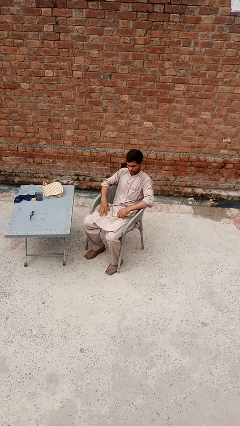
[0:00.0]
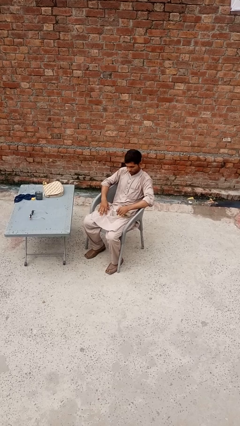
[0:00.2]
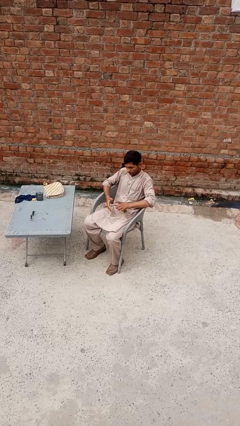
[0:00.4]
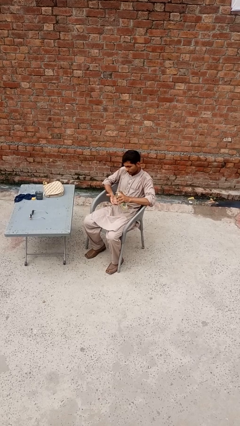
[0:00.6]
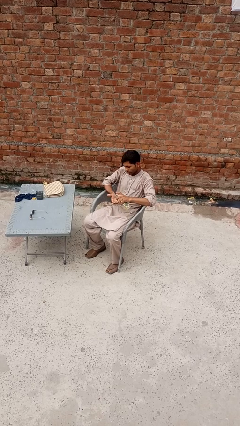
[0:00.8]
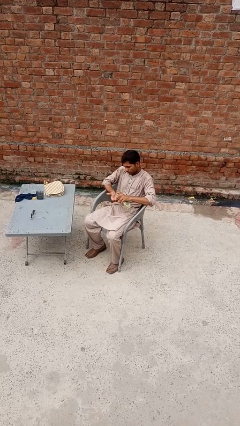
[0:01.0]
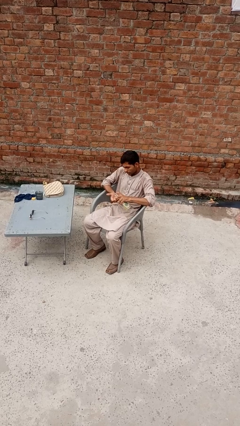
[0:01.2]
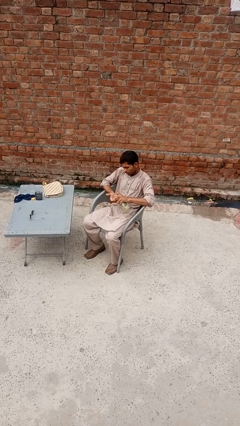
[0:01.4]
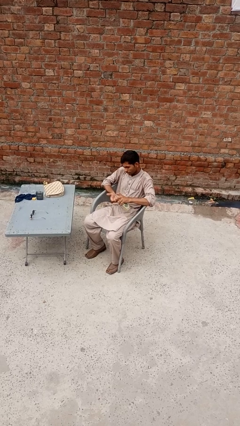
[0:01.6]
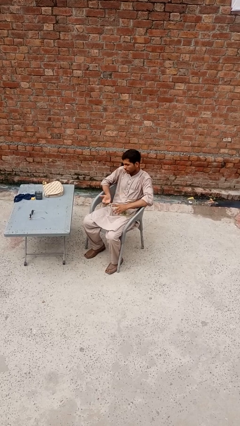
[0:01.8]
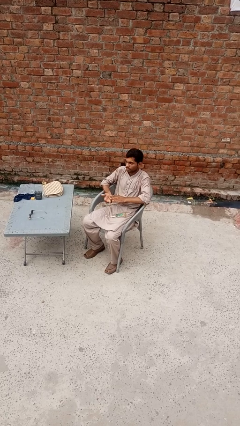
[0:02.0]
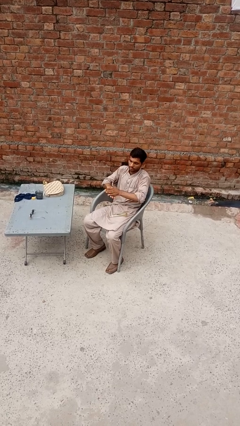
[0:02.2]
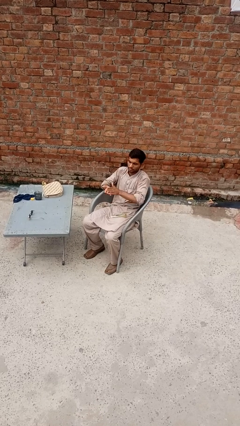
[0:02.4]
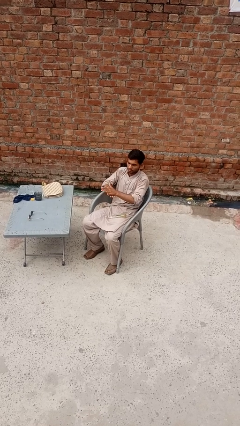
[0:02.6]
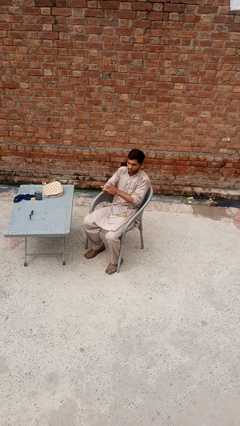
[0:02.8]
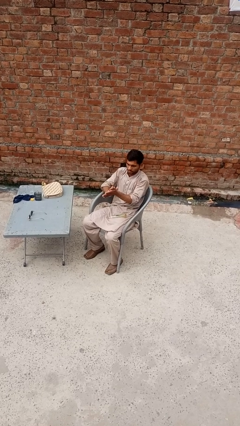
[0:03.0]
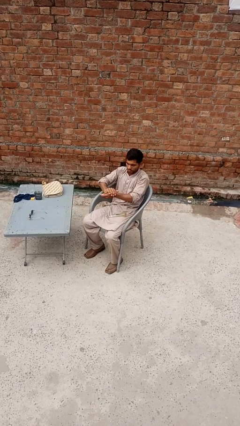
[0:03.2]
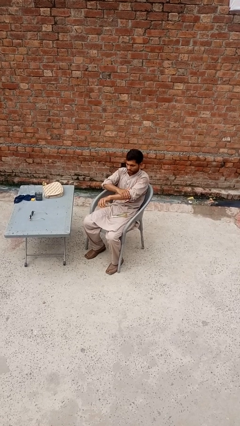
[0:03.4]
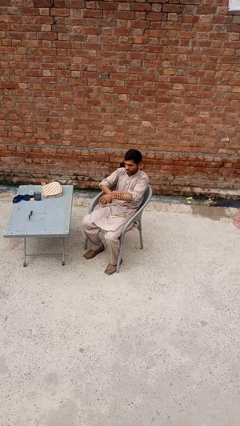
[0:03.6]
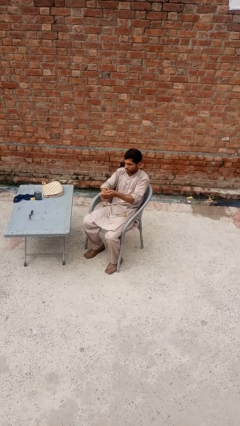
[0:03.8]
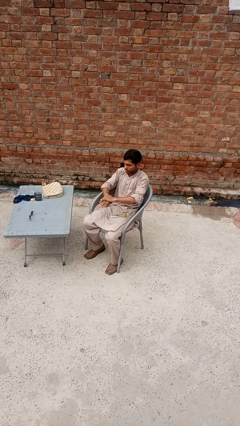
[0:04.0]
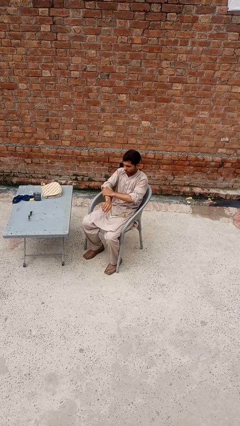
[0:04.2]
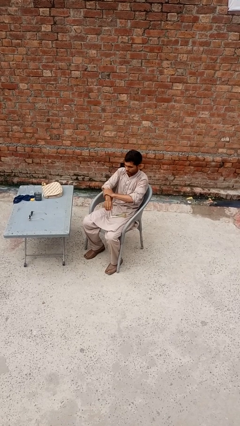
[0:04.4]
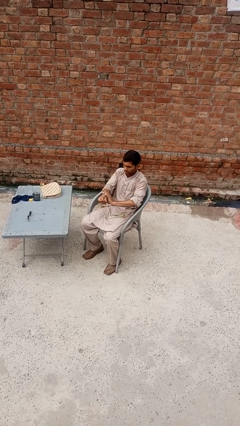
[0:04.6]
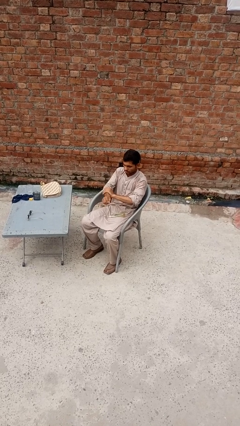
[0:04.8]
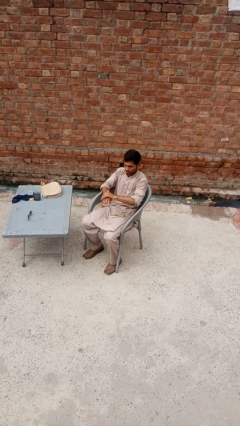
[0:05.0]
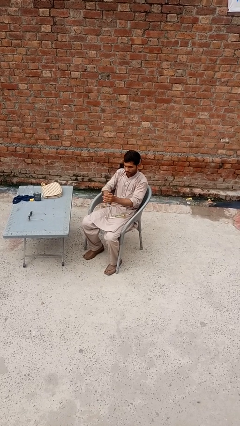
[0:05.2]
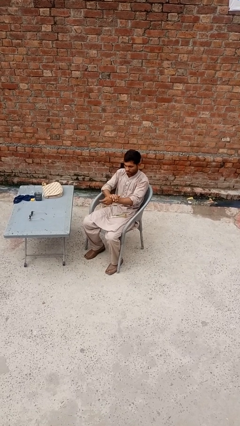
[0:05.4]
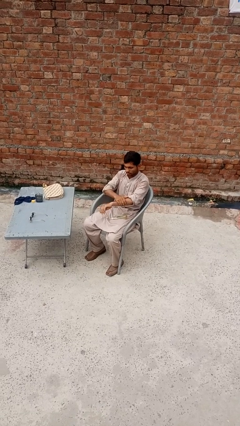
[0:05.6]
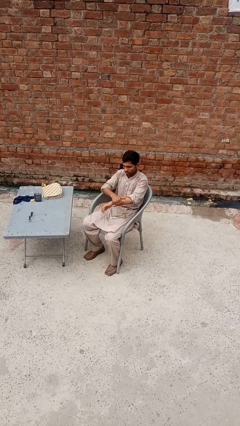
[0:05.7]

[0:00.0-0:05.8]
person applies sunscreen

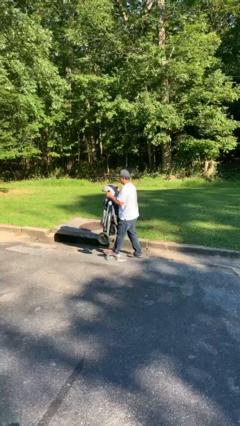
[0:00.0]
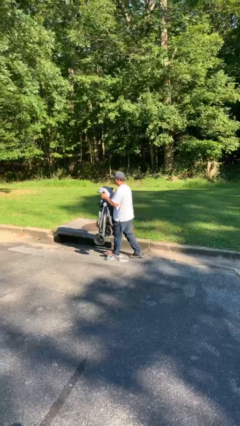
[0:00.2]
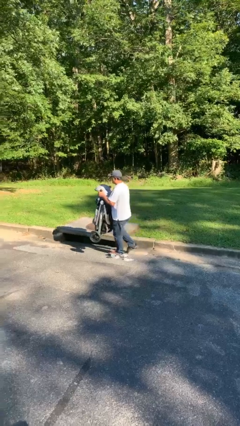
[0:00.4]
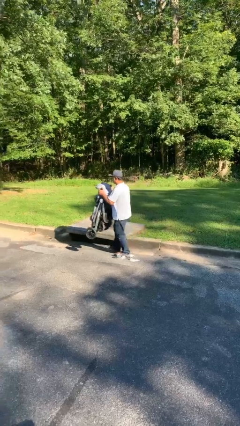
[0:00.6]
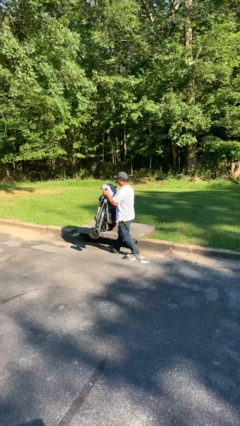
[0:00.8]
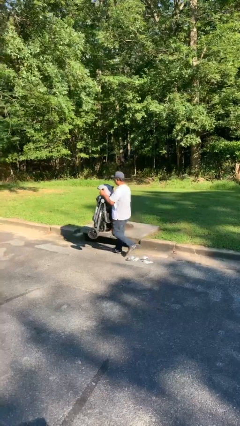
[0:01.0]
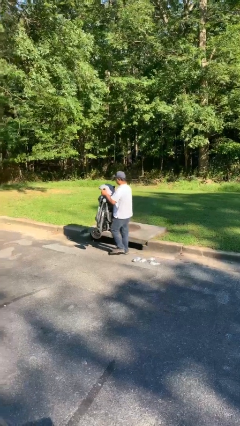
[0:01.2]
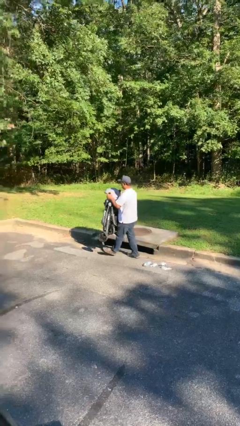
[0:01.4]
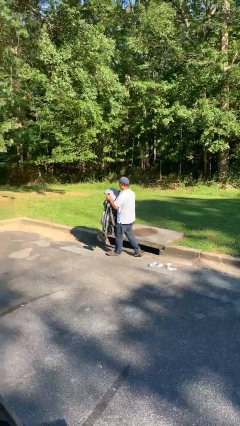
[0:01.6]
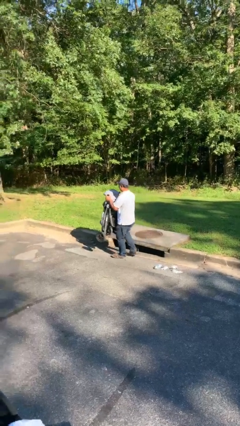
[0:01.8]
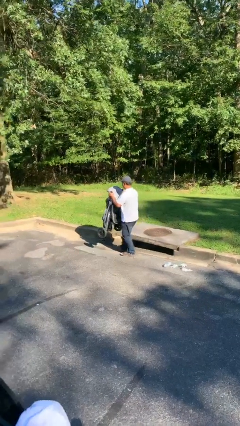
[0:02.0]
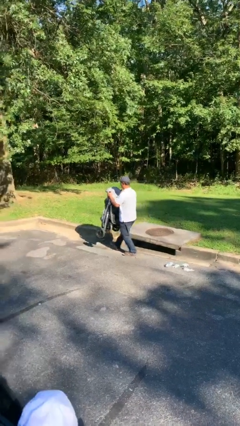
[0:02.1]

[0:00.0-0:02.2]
person carries heavy object

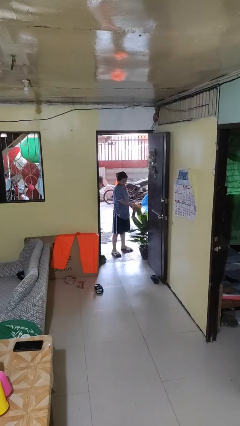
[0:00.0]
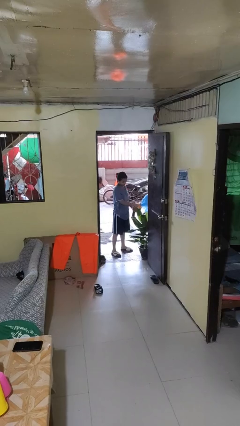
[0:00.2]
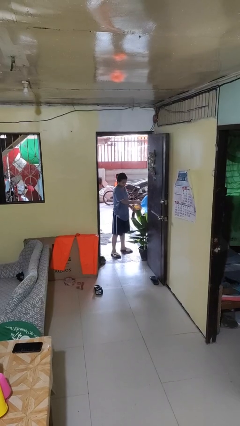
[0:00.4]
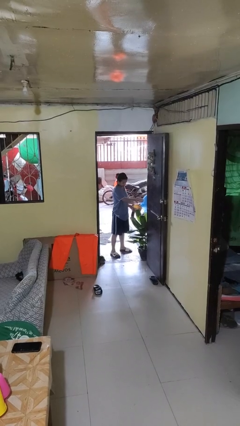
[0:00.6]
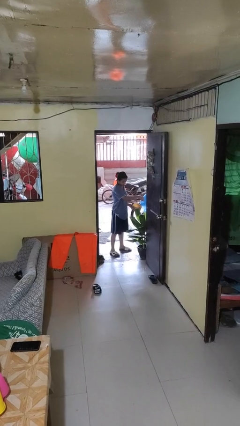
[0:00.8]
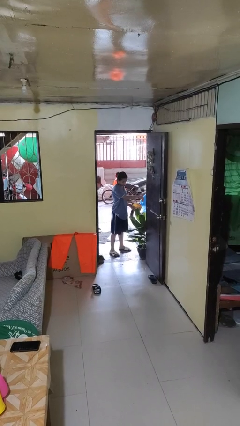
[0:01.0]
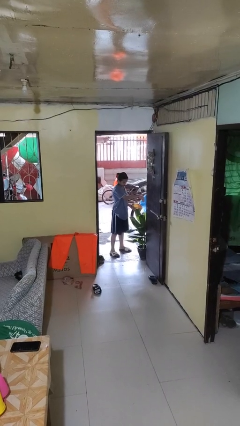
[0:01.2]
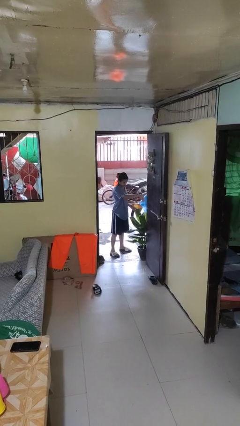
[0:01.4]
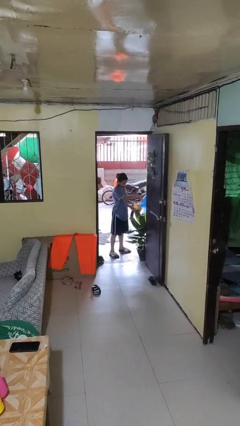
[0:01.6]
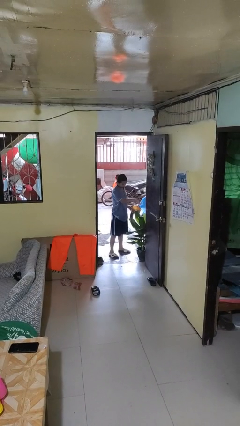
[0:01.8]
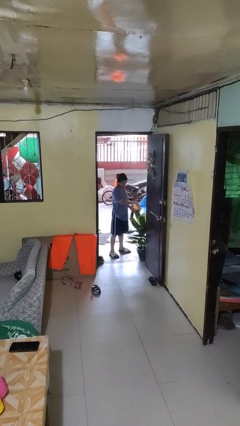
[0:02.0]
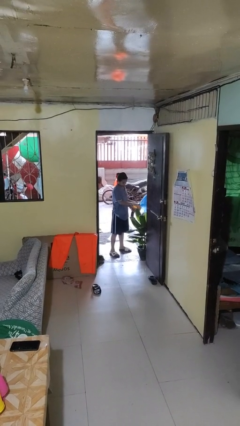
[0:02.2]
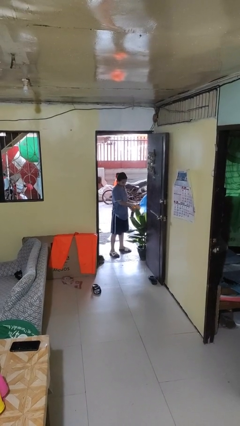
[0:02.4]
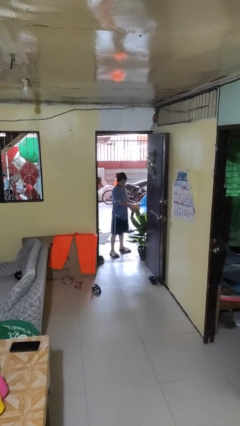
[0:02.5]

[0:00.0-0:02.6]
person waters houseplant

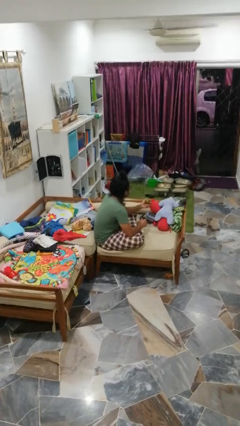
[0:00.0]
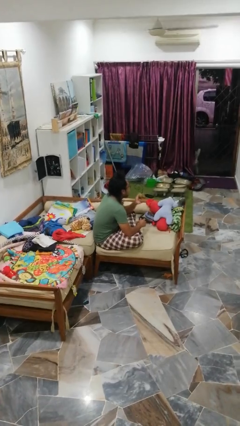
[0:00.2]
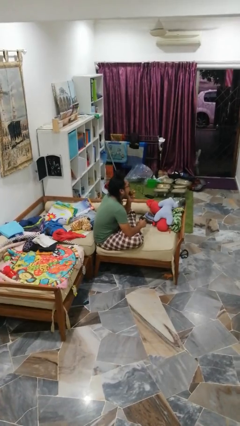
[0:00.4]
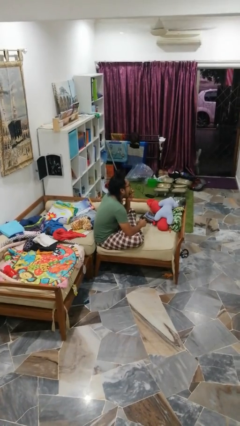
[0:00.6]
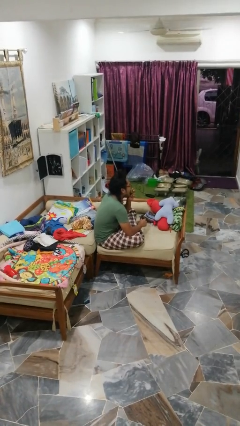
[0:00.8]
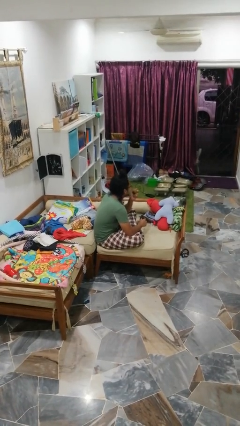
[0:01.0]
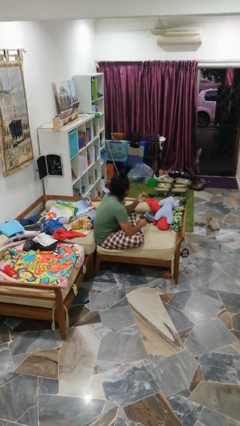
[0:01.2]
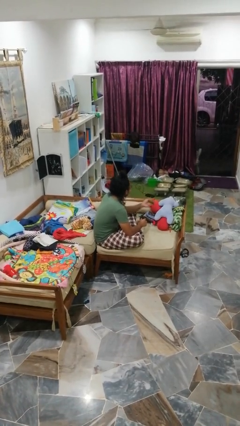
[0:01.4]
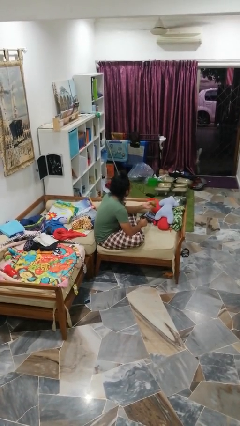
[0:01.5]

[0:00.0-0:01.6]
person eats apple

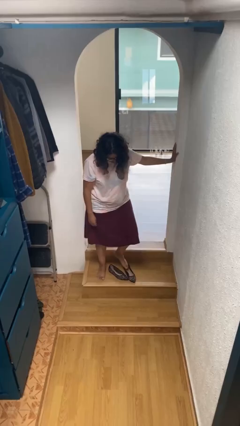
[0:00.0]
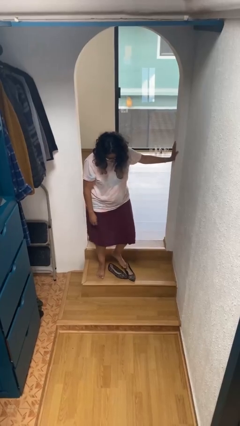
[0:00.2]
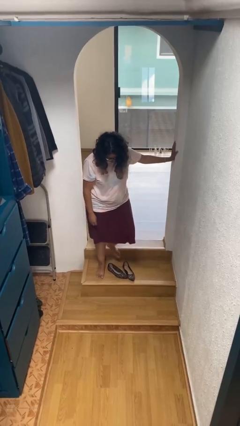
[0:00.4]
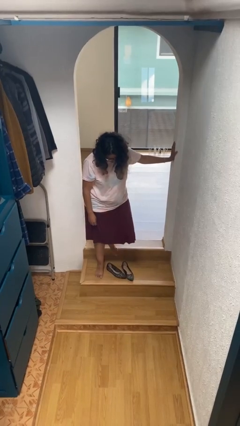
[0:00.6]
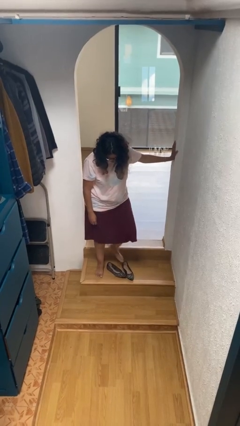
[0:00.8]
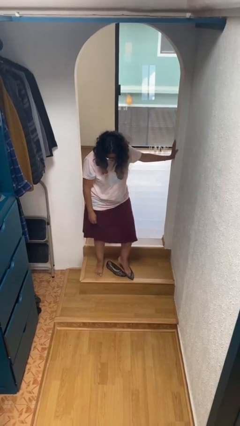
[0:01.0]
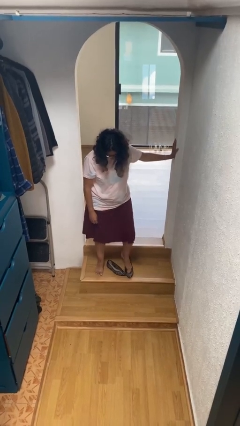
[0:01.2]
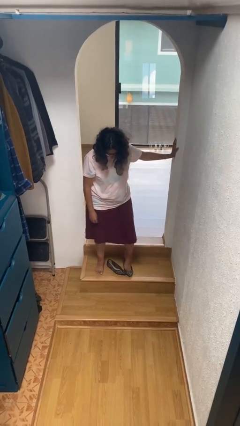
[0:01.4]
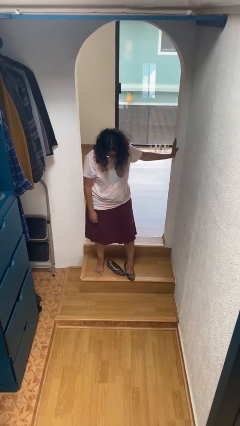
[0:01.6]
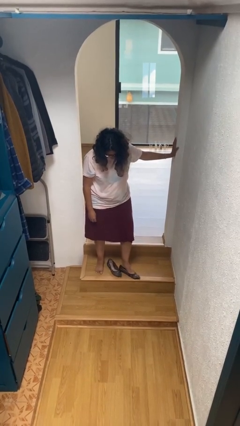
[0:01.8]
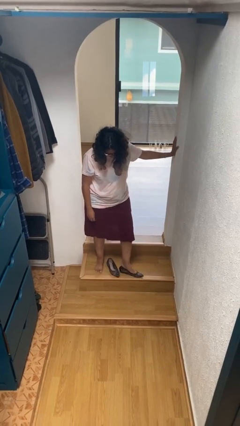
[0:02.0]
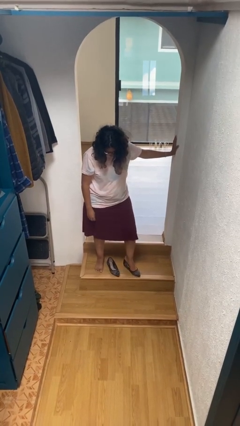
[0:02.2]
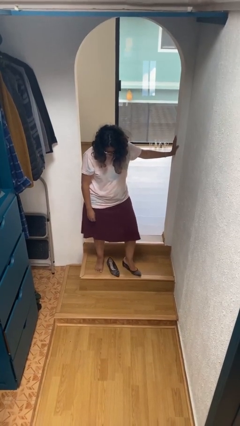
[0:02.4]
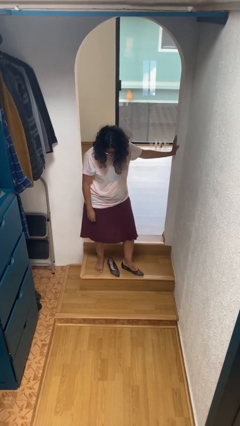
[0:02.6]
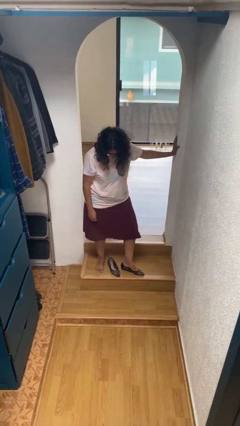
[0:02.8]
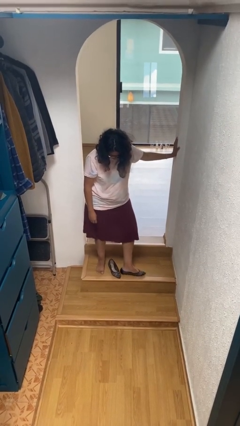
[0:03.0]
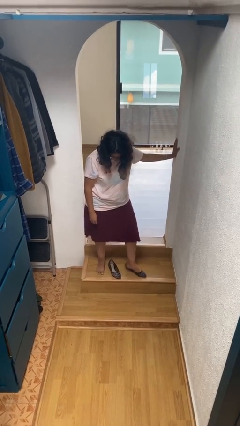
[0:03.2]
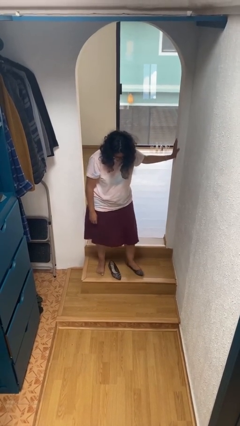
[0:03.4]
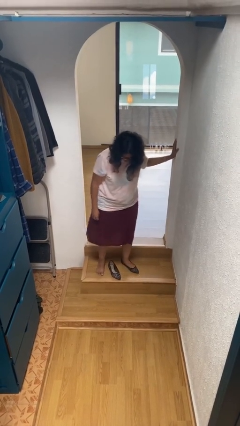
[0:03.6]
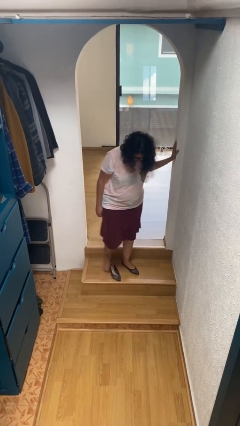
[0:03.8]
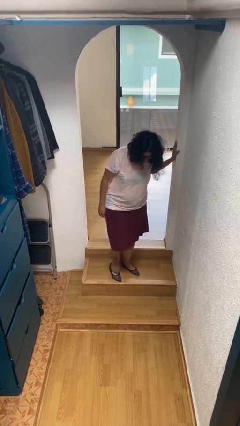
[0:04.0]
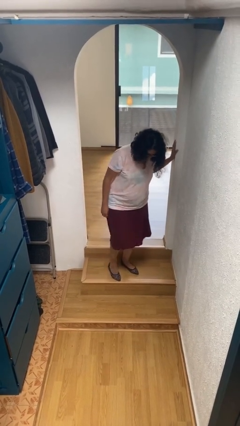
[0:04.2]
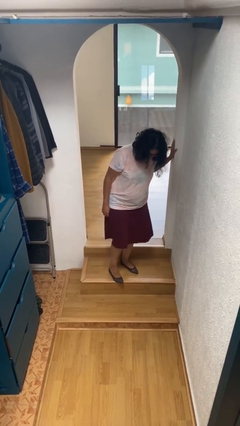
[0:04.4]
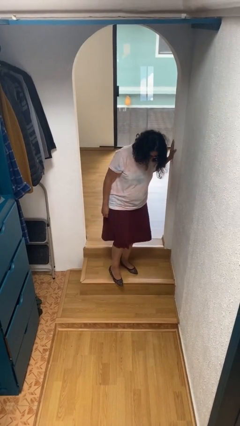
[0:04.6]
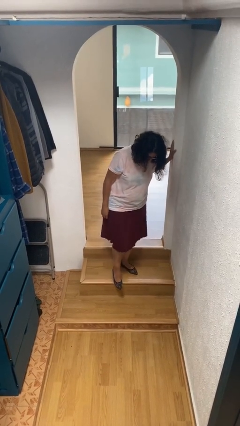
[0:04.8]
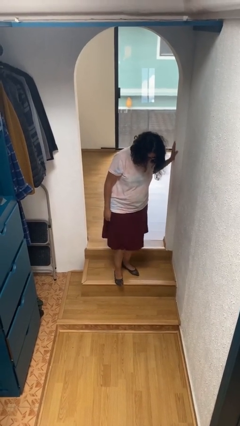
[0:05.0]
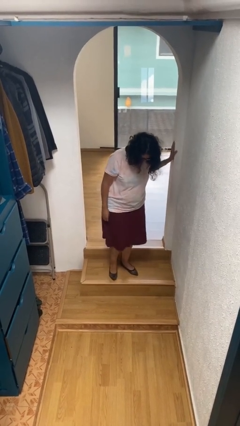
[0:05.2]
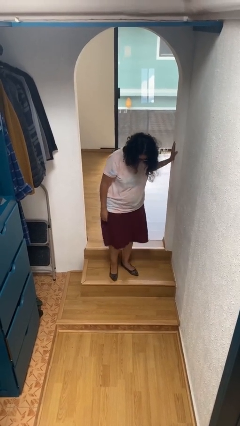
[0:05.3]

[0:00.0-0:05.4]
person puts on shoes
